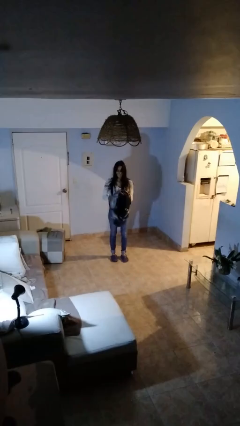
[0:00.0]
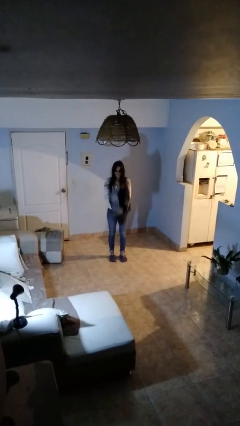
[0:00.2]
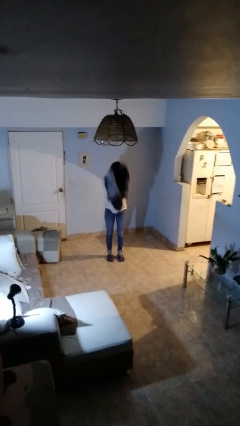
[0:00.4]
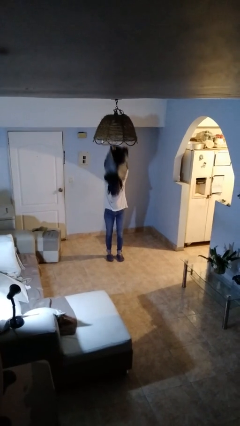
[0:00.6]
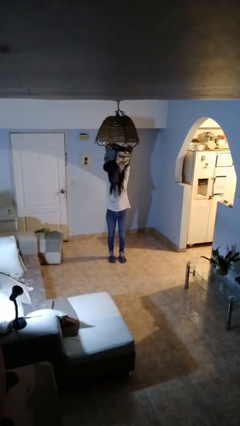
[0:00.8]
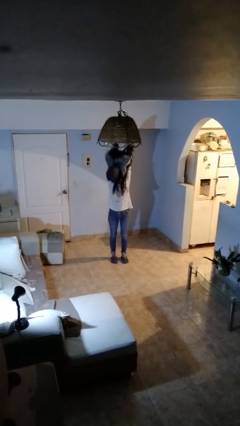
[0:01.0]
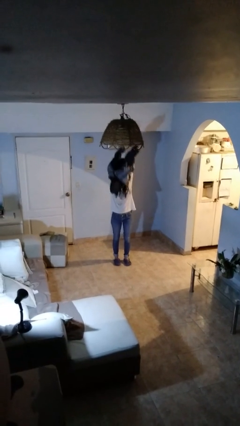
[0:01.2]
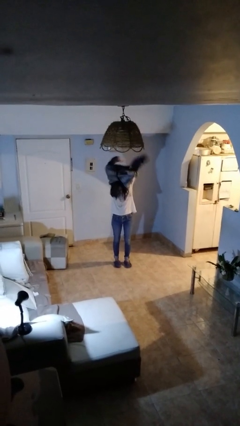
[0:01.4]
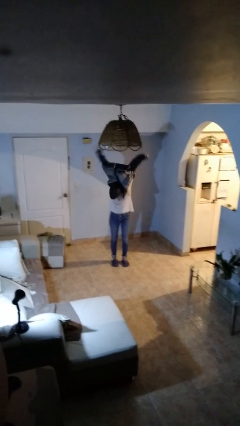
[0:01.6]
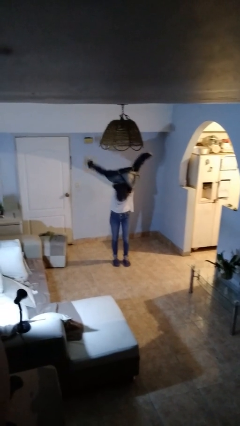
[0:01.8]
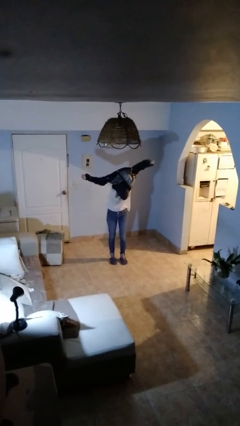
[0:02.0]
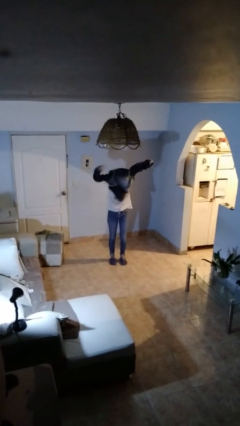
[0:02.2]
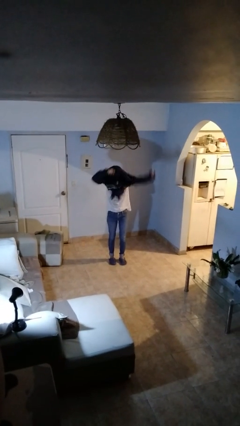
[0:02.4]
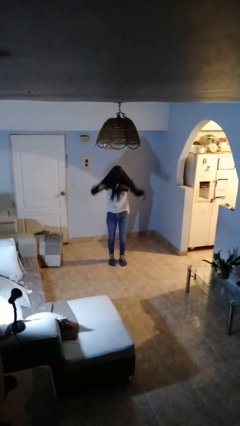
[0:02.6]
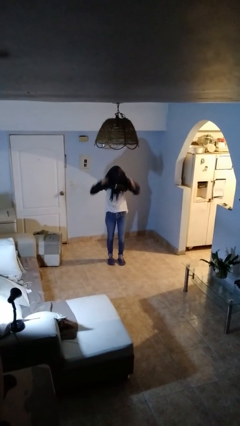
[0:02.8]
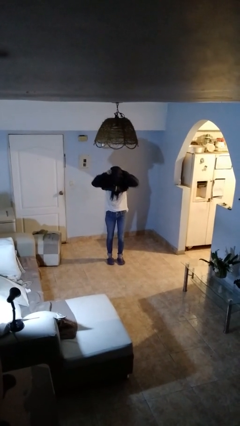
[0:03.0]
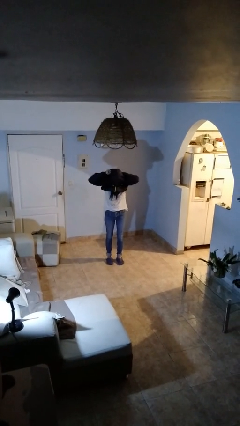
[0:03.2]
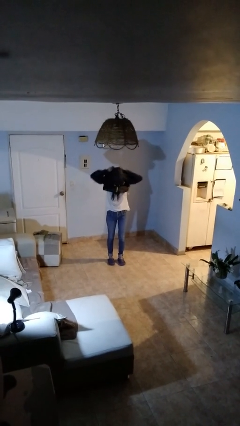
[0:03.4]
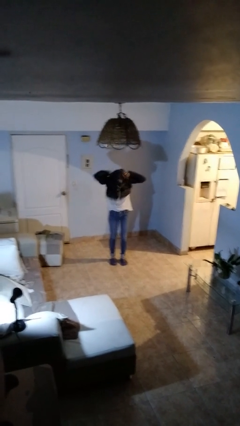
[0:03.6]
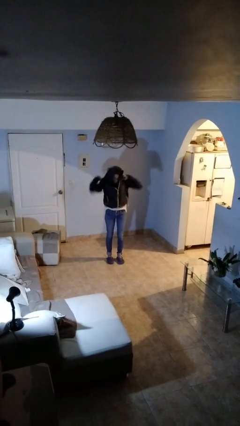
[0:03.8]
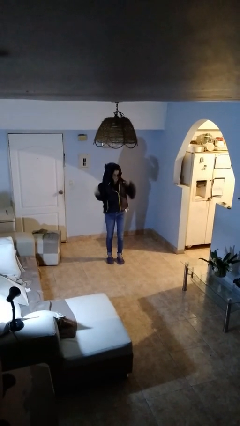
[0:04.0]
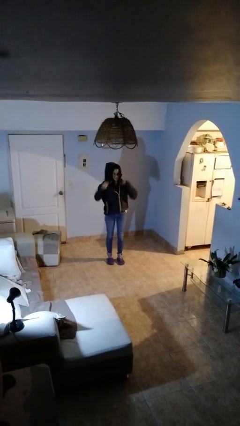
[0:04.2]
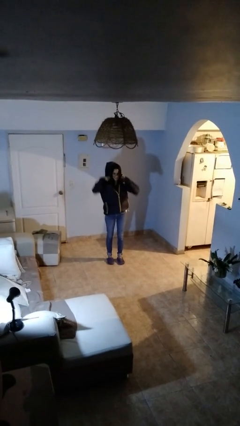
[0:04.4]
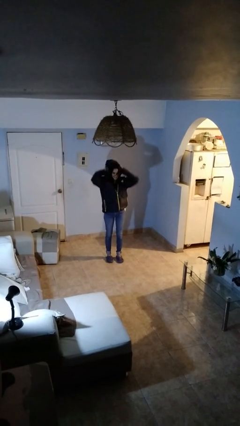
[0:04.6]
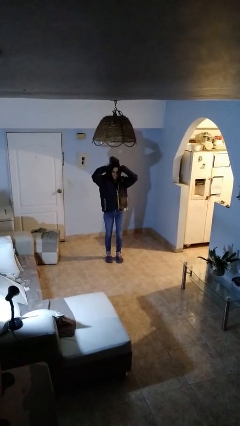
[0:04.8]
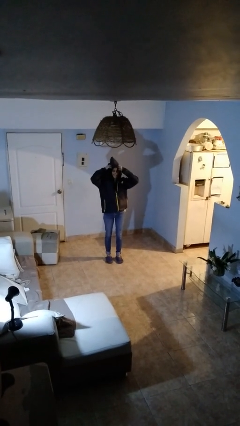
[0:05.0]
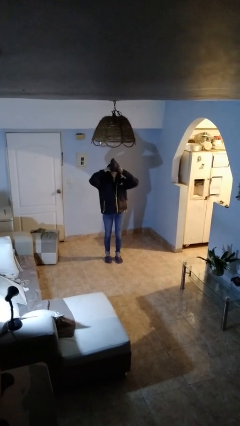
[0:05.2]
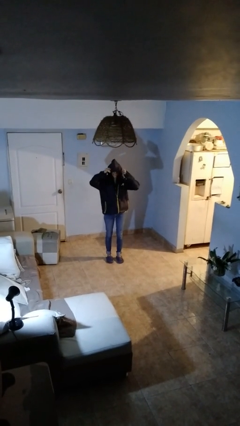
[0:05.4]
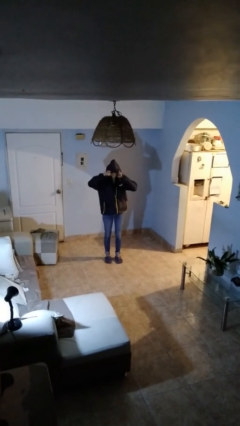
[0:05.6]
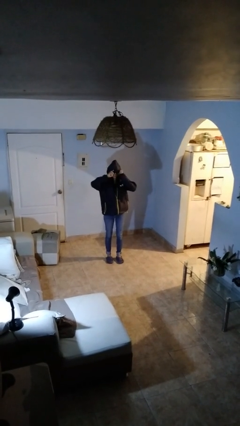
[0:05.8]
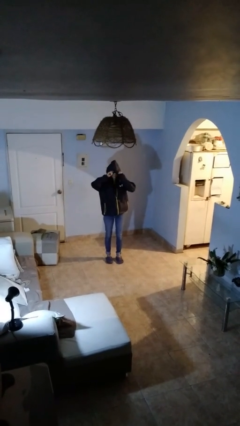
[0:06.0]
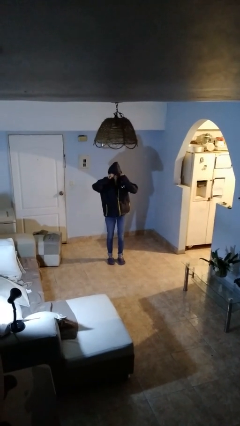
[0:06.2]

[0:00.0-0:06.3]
person puts on hoodie

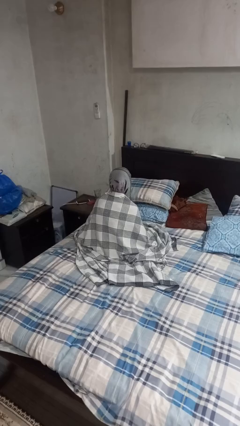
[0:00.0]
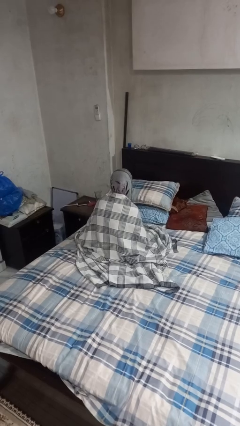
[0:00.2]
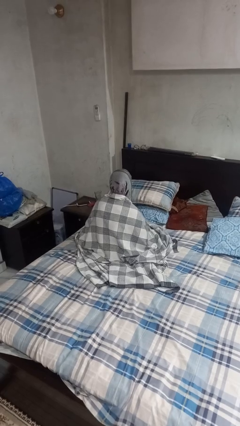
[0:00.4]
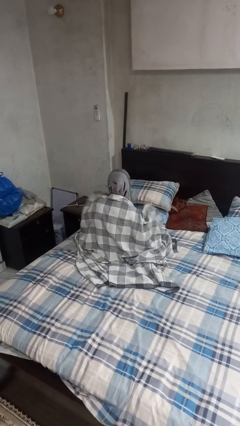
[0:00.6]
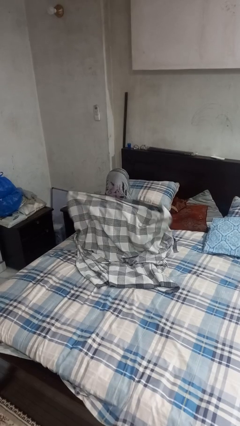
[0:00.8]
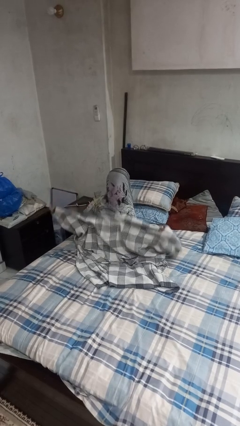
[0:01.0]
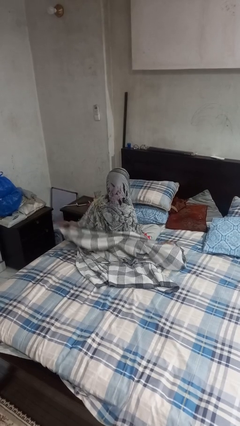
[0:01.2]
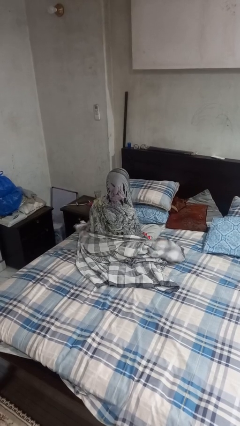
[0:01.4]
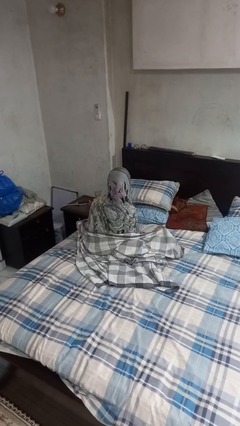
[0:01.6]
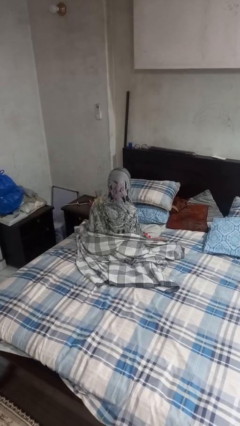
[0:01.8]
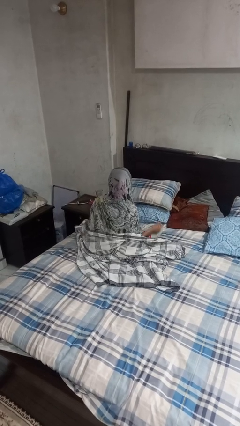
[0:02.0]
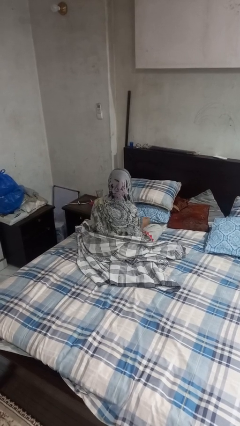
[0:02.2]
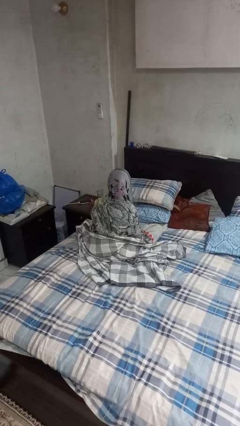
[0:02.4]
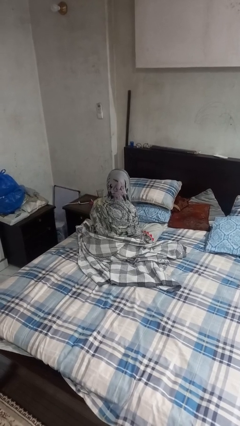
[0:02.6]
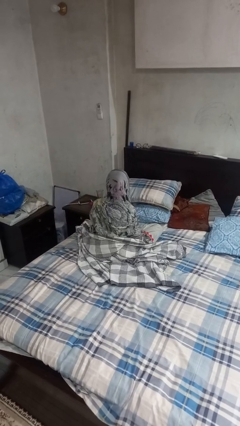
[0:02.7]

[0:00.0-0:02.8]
person uncovers with blanket

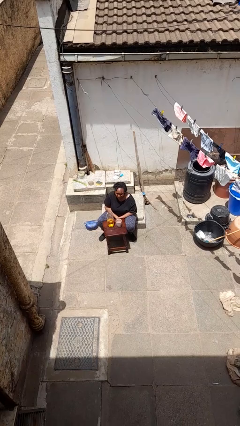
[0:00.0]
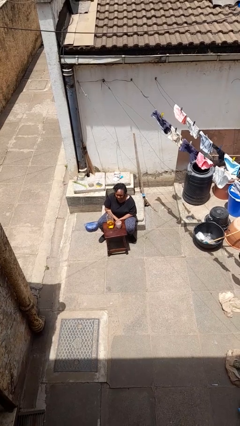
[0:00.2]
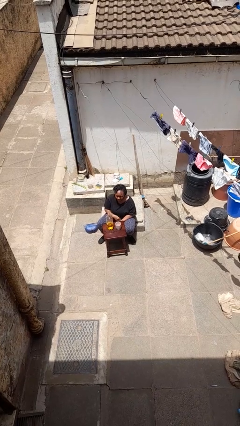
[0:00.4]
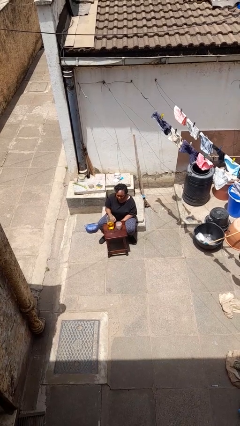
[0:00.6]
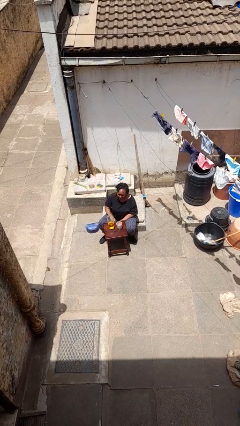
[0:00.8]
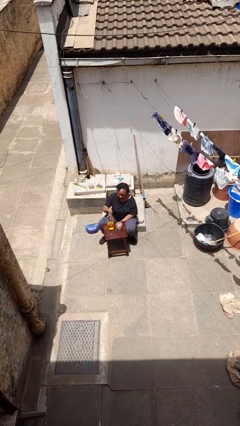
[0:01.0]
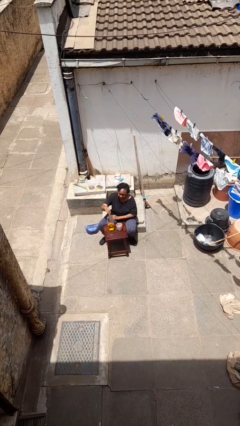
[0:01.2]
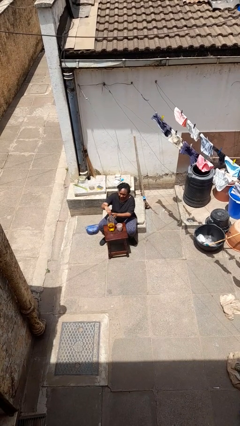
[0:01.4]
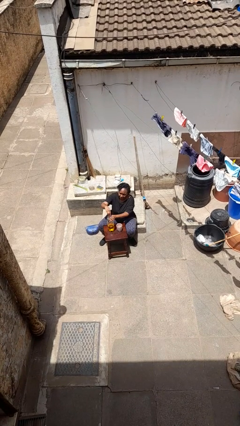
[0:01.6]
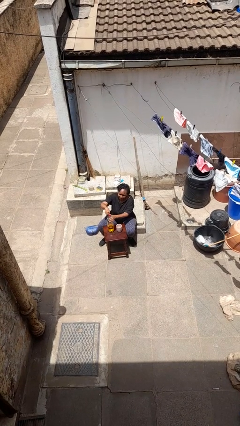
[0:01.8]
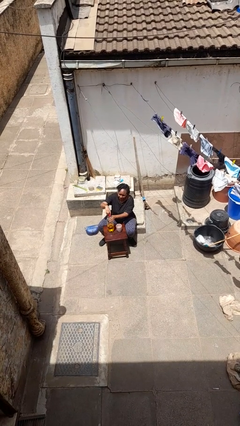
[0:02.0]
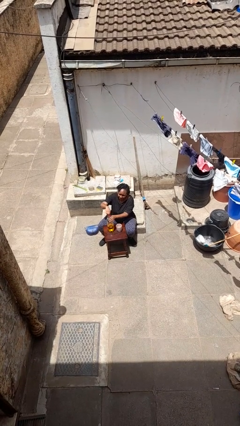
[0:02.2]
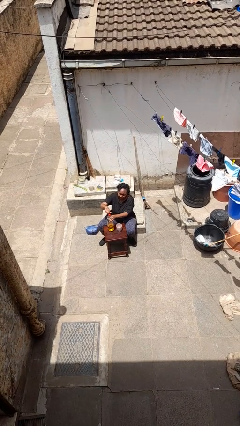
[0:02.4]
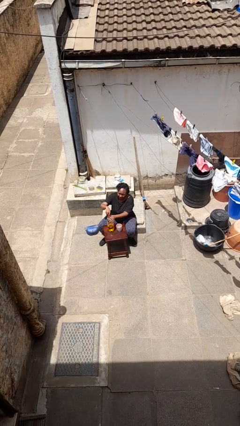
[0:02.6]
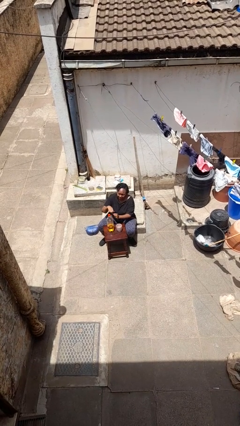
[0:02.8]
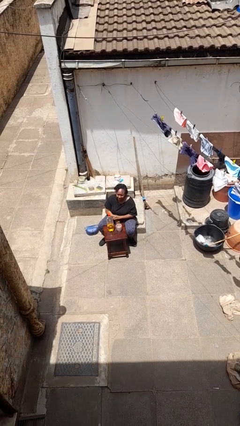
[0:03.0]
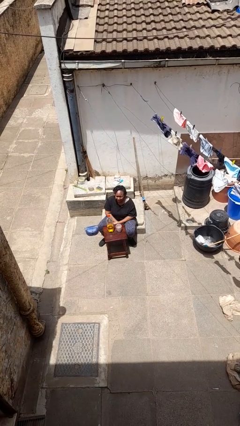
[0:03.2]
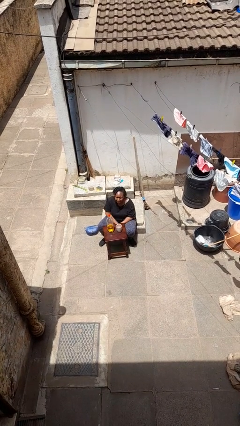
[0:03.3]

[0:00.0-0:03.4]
person screws lid to bottle

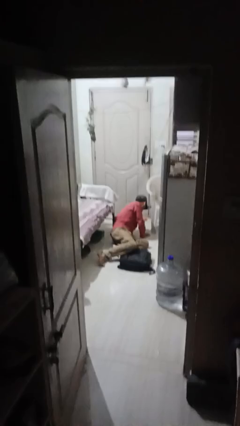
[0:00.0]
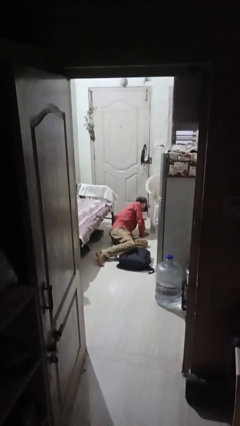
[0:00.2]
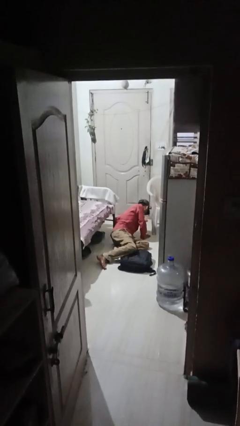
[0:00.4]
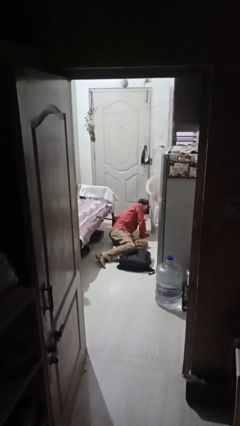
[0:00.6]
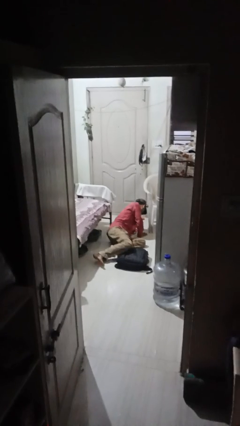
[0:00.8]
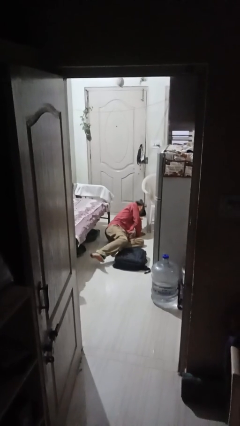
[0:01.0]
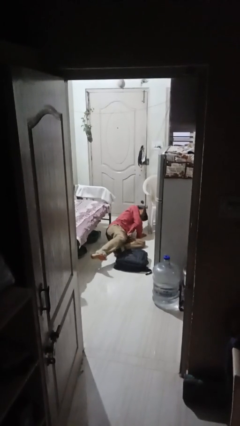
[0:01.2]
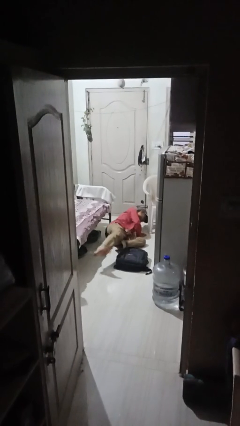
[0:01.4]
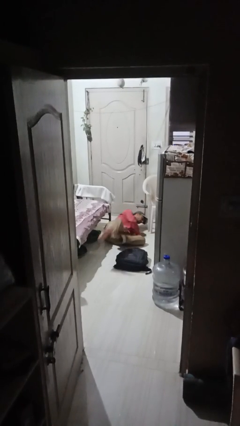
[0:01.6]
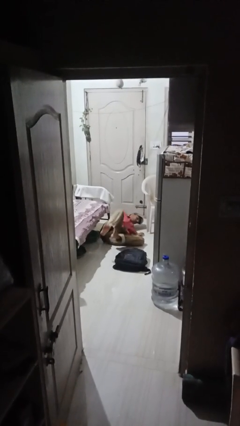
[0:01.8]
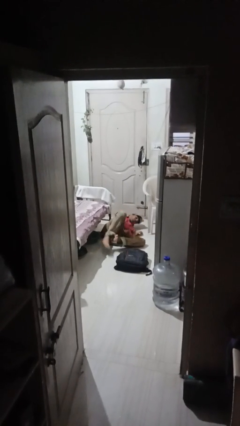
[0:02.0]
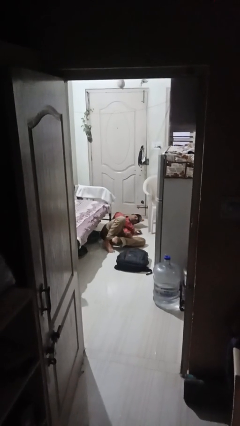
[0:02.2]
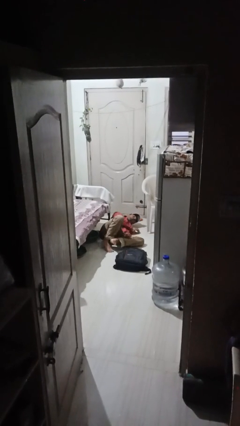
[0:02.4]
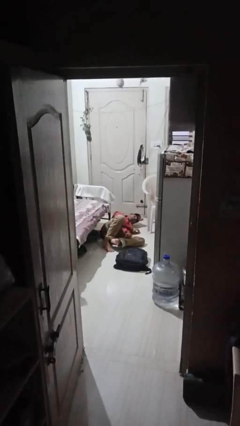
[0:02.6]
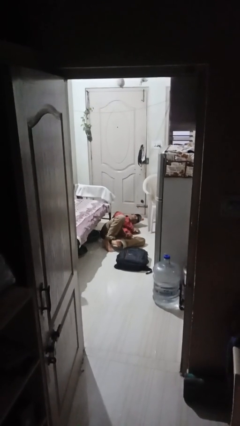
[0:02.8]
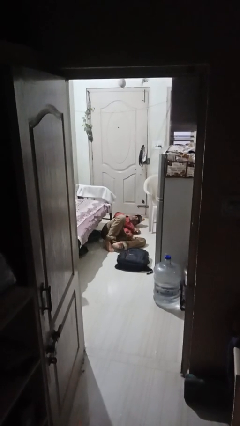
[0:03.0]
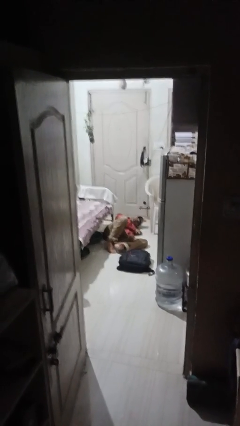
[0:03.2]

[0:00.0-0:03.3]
person lies down on floor

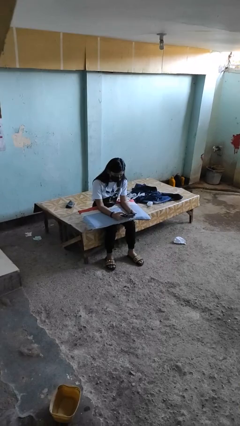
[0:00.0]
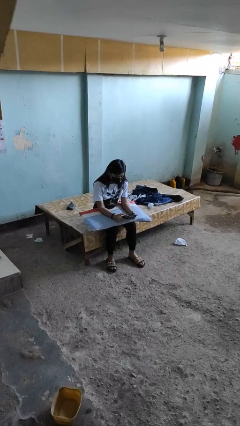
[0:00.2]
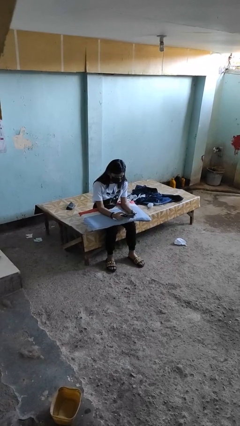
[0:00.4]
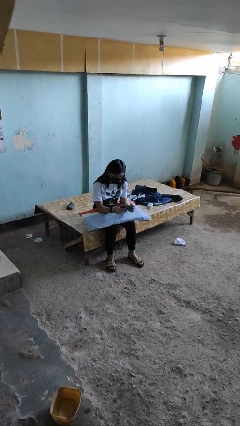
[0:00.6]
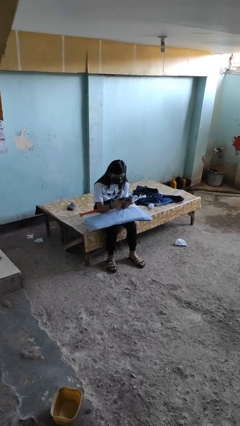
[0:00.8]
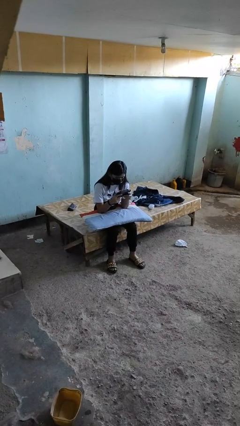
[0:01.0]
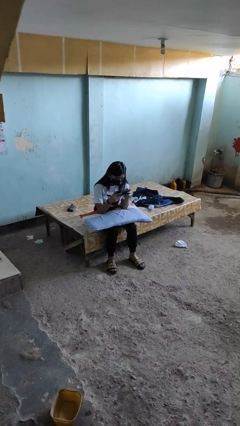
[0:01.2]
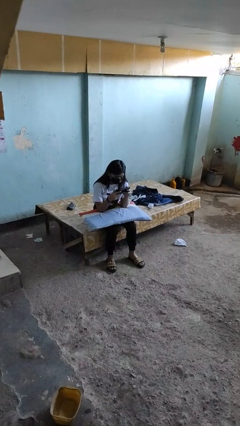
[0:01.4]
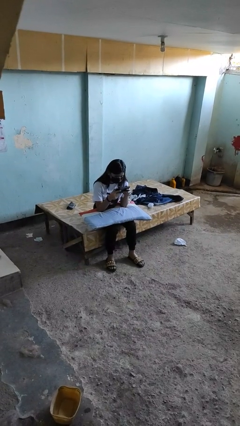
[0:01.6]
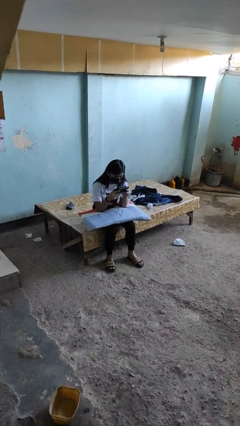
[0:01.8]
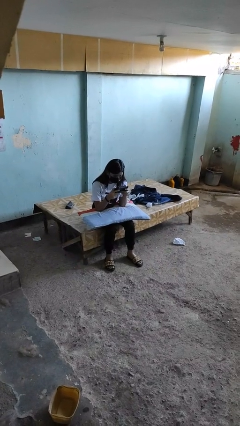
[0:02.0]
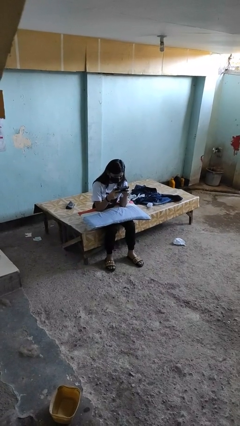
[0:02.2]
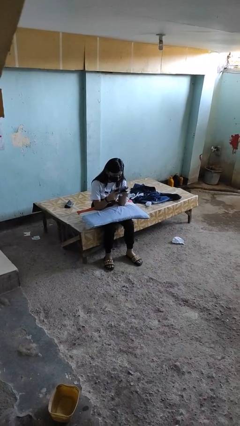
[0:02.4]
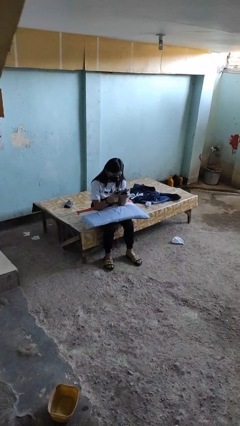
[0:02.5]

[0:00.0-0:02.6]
person interacts with handheld game
